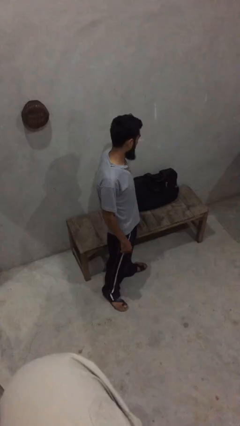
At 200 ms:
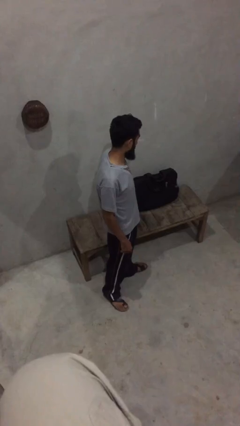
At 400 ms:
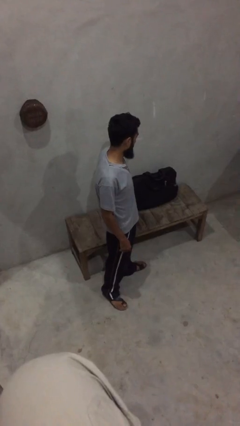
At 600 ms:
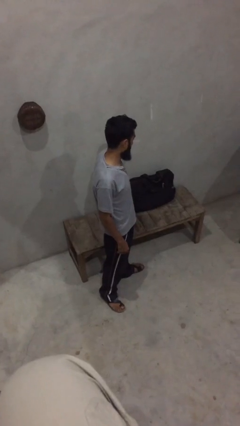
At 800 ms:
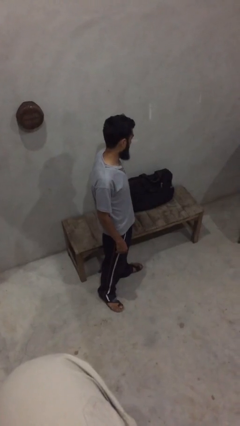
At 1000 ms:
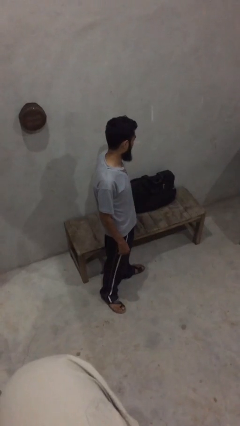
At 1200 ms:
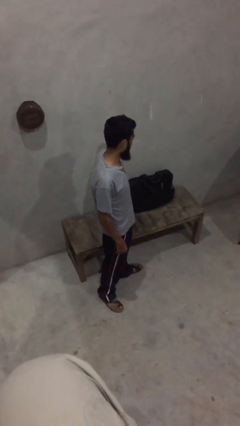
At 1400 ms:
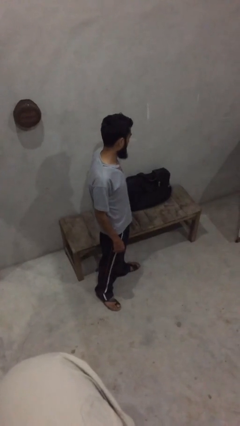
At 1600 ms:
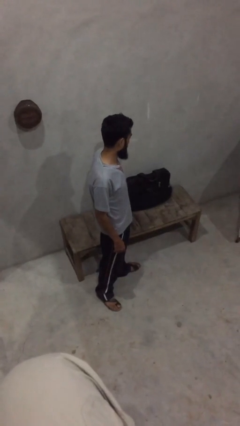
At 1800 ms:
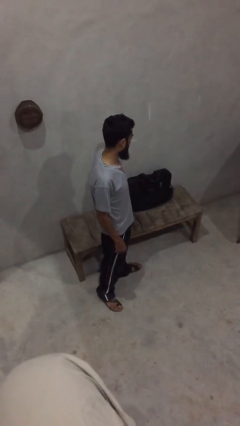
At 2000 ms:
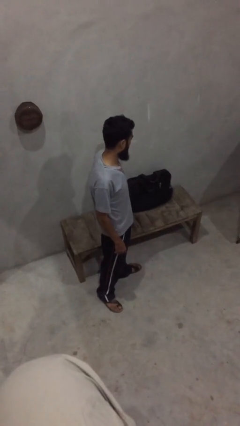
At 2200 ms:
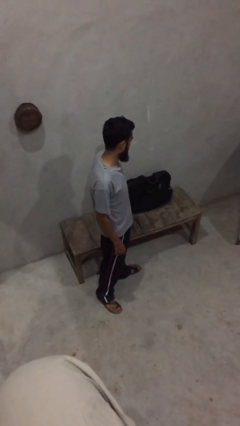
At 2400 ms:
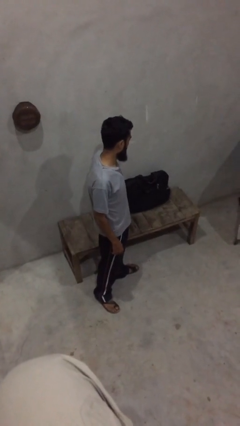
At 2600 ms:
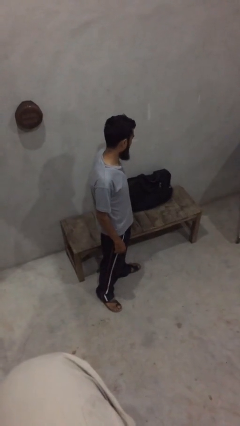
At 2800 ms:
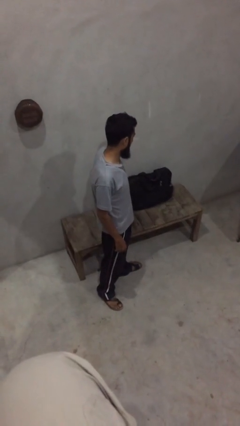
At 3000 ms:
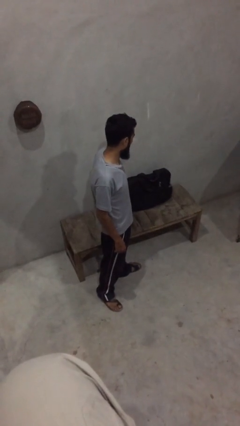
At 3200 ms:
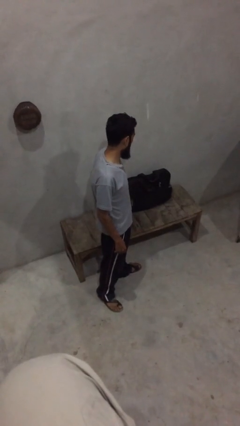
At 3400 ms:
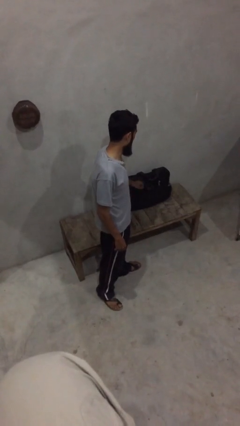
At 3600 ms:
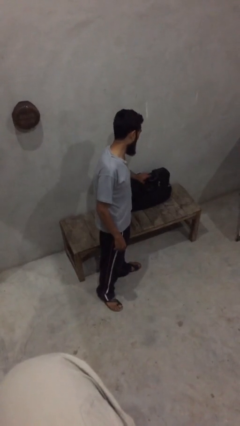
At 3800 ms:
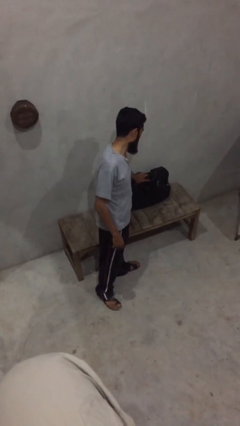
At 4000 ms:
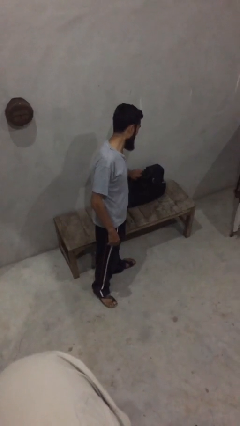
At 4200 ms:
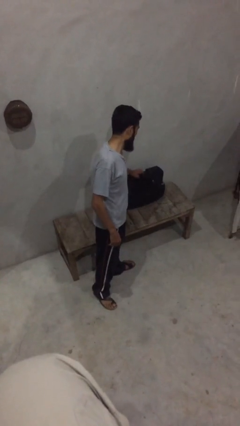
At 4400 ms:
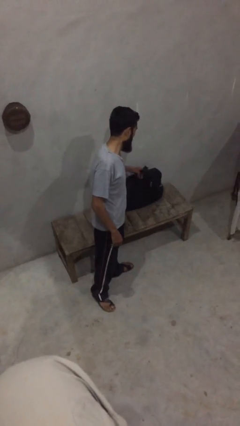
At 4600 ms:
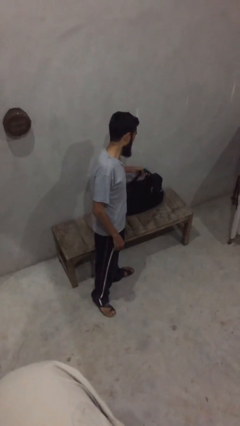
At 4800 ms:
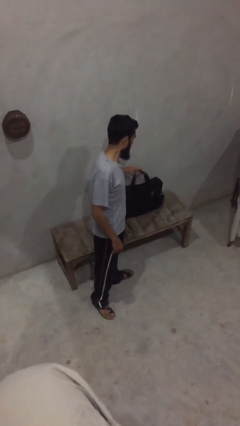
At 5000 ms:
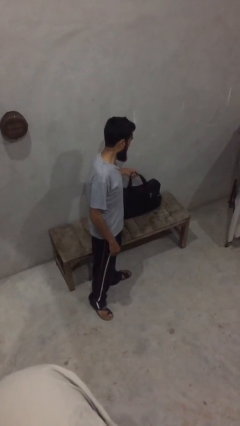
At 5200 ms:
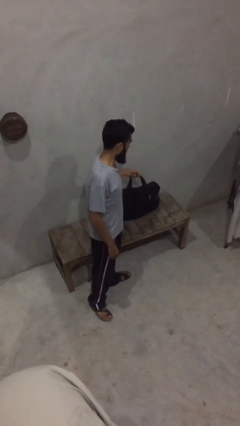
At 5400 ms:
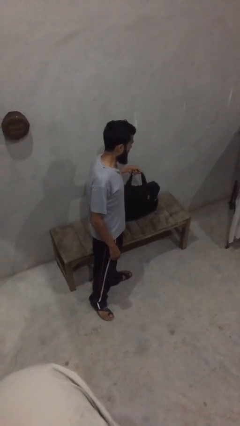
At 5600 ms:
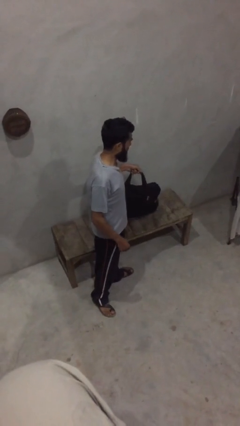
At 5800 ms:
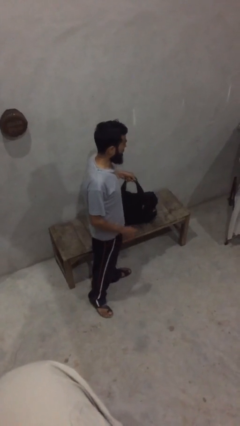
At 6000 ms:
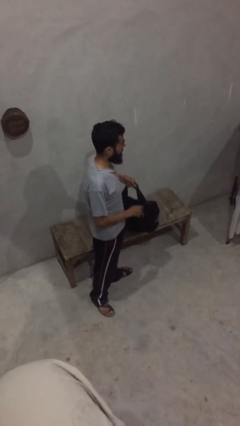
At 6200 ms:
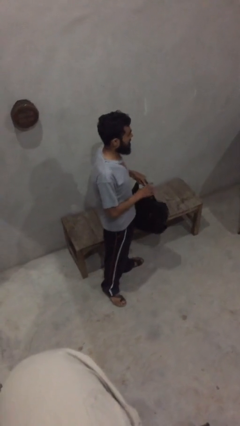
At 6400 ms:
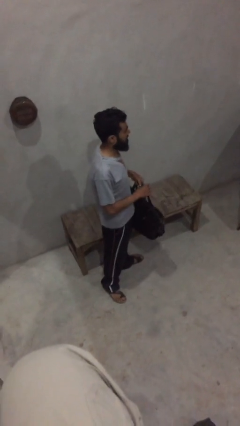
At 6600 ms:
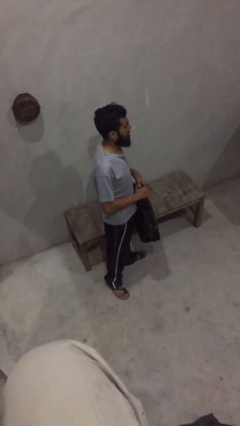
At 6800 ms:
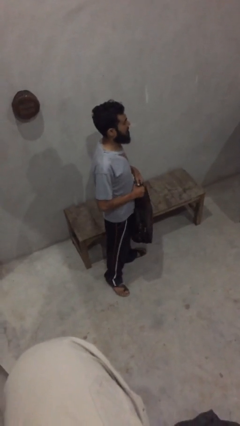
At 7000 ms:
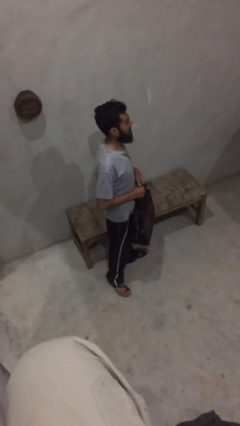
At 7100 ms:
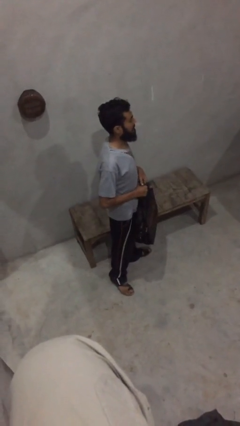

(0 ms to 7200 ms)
person picks up object from table

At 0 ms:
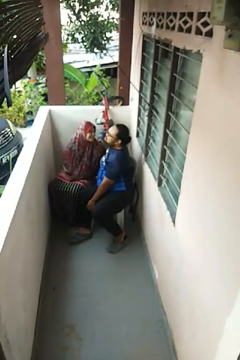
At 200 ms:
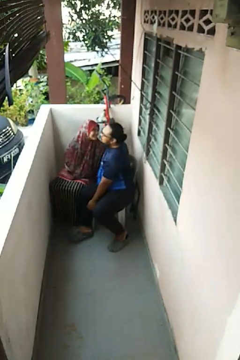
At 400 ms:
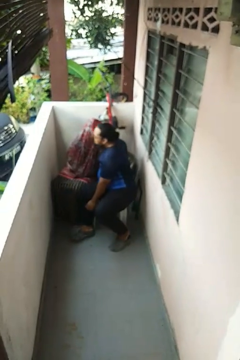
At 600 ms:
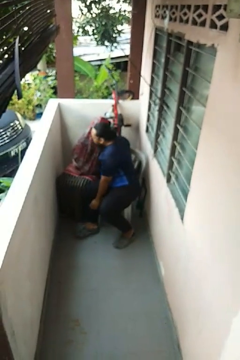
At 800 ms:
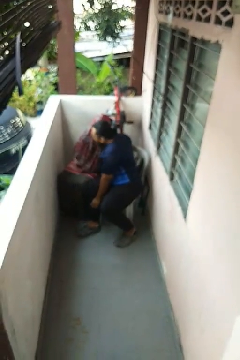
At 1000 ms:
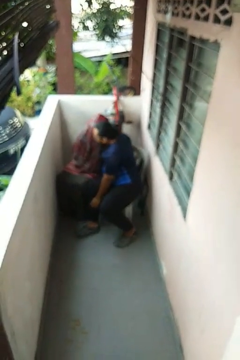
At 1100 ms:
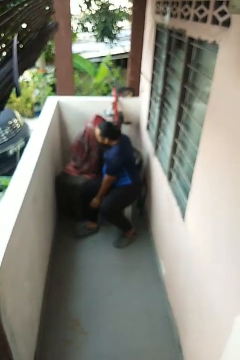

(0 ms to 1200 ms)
person kisses cheek of person

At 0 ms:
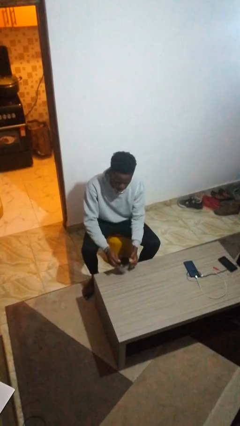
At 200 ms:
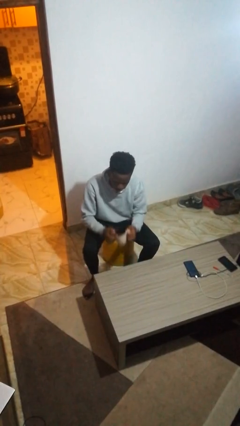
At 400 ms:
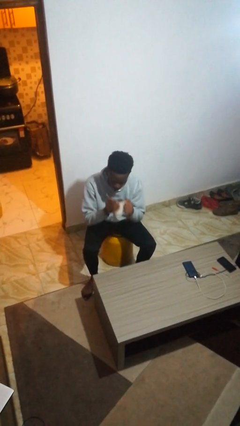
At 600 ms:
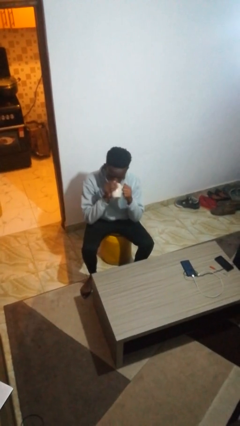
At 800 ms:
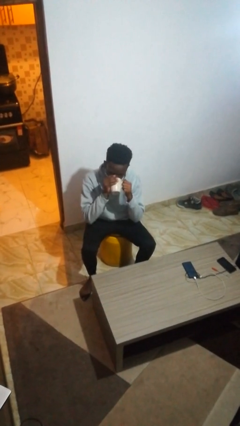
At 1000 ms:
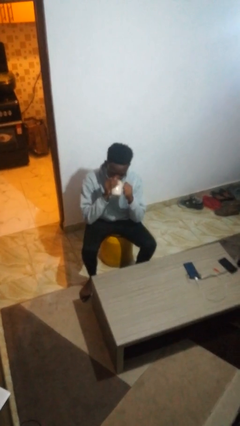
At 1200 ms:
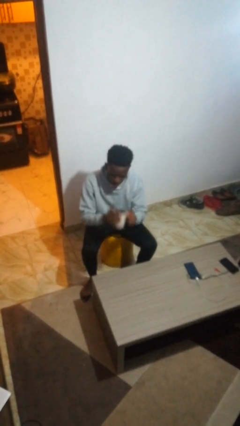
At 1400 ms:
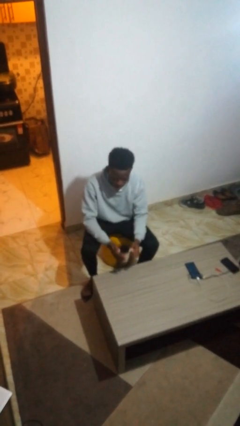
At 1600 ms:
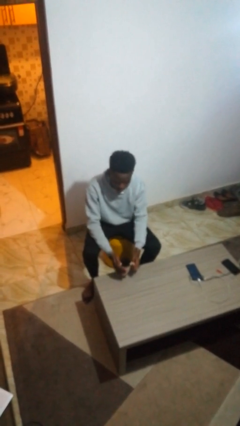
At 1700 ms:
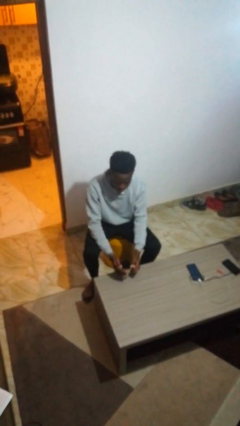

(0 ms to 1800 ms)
person drinks from mug

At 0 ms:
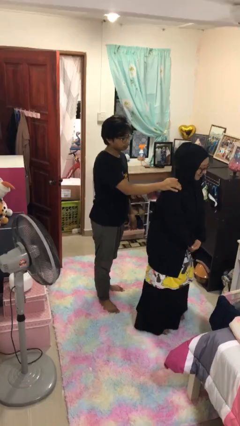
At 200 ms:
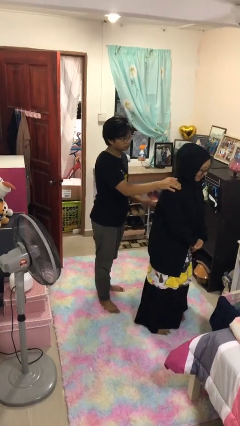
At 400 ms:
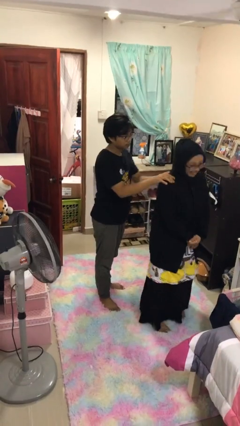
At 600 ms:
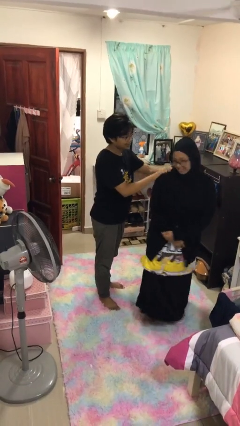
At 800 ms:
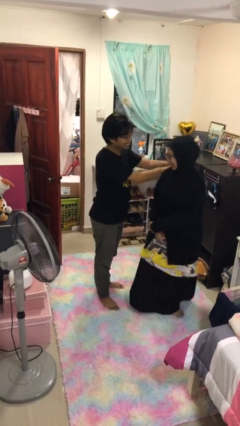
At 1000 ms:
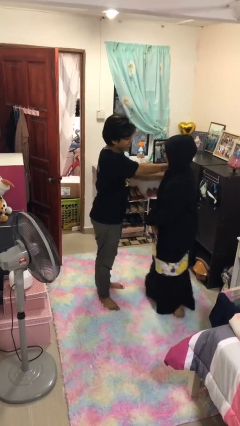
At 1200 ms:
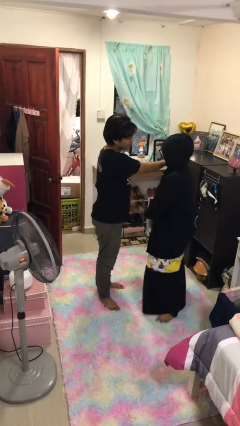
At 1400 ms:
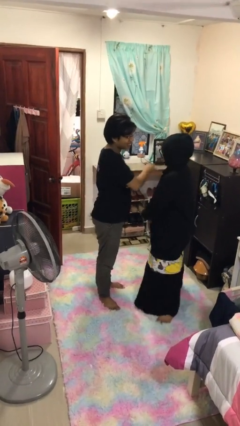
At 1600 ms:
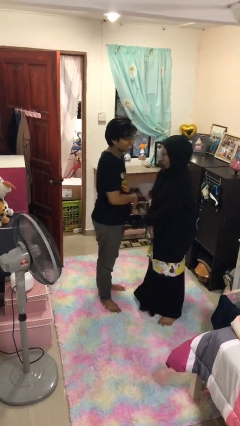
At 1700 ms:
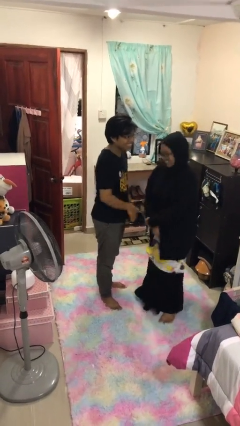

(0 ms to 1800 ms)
person spins person around

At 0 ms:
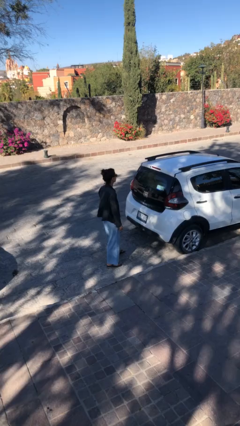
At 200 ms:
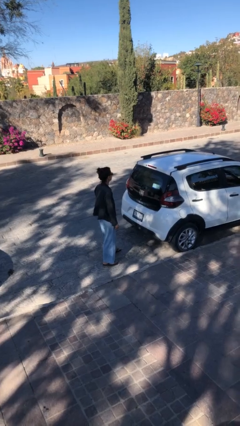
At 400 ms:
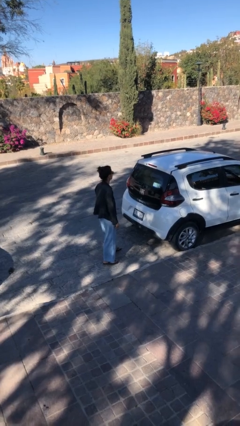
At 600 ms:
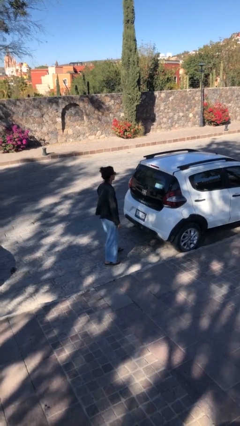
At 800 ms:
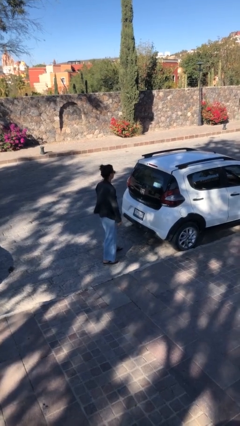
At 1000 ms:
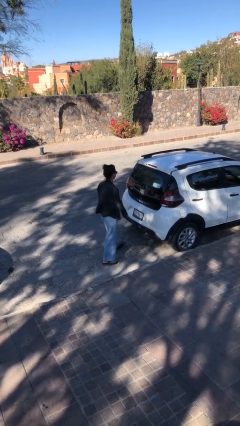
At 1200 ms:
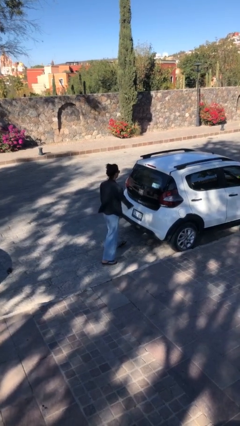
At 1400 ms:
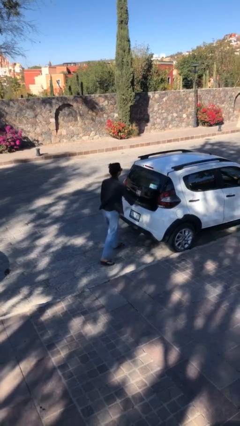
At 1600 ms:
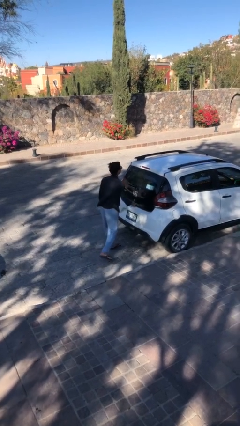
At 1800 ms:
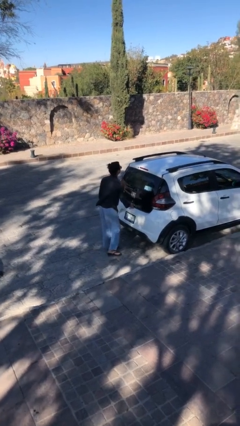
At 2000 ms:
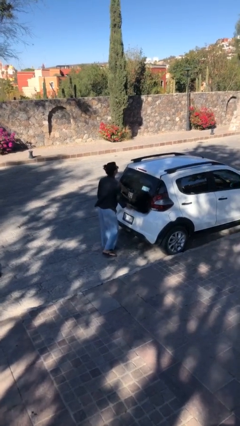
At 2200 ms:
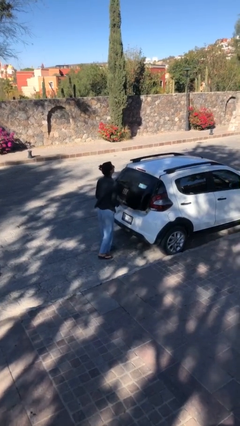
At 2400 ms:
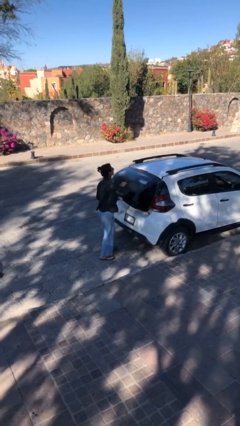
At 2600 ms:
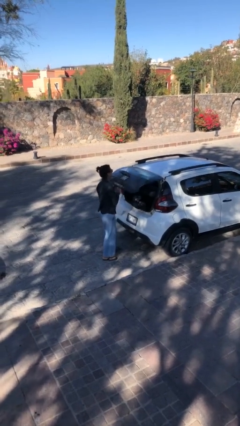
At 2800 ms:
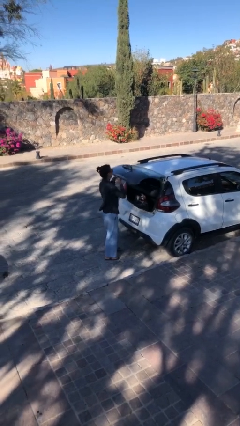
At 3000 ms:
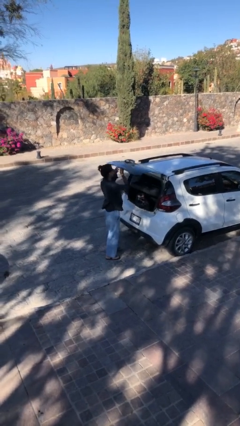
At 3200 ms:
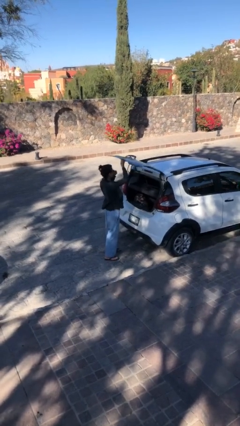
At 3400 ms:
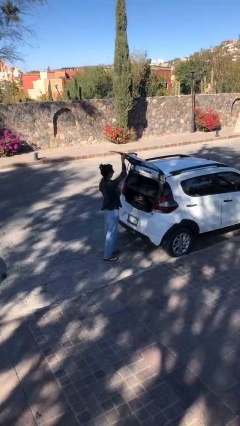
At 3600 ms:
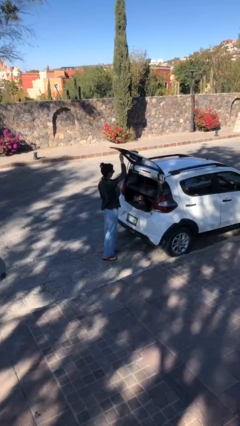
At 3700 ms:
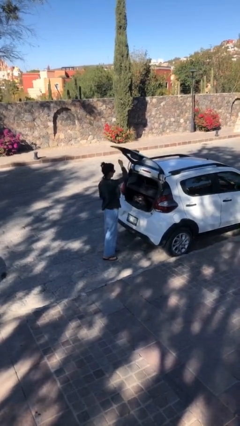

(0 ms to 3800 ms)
person opens car trunk

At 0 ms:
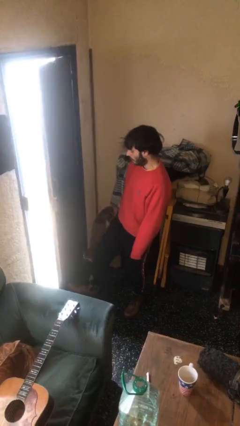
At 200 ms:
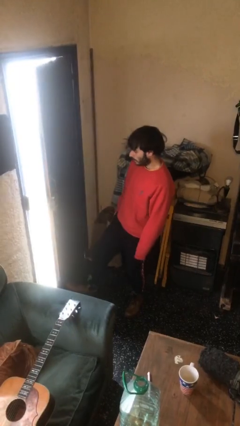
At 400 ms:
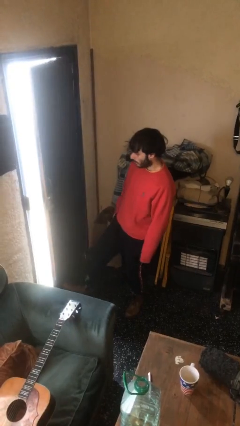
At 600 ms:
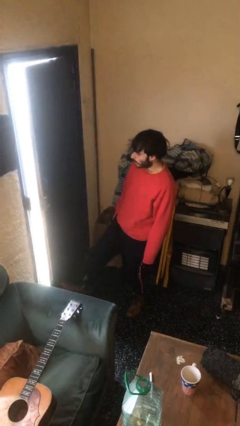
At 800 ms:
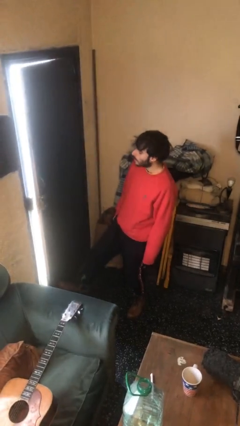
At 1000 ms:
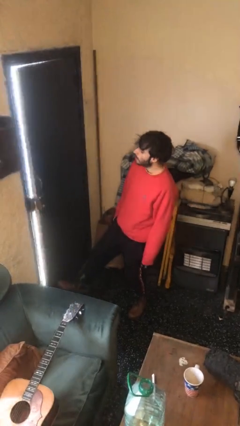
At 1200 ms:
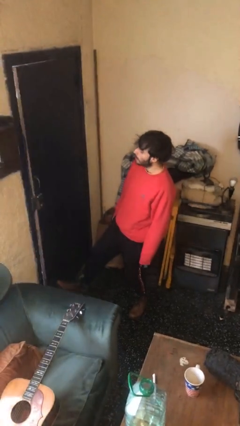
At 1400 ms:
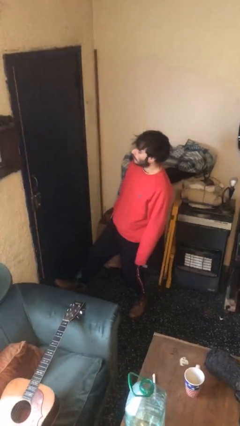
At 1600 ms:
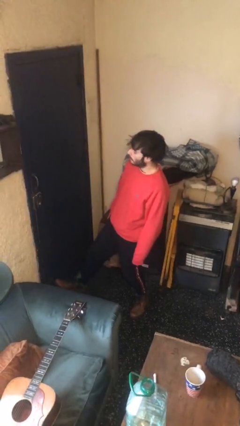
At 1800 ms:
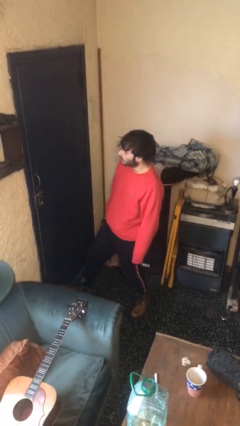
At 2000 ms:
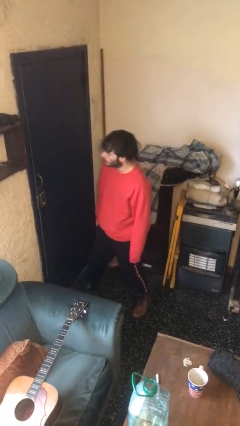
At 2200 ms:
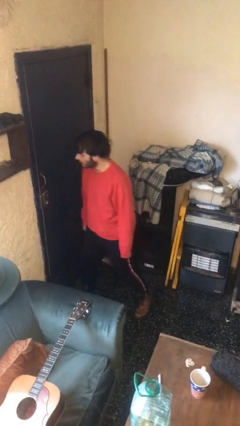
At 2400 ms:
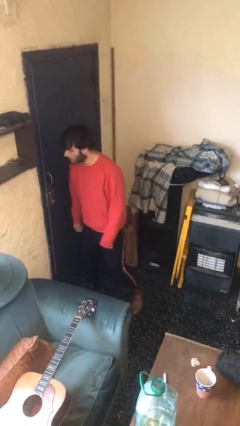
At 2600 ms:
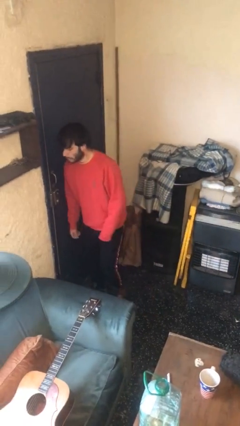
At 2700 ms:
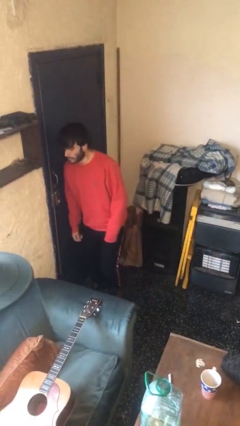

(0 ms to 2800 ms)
person closes door with foot
